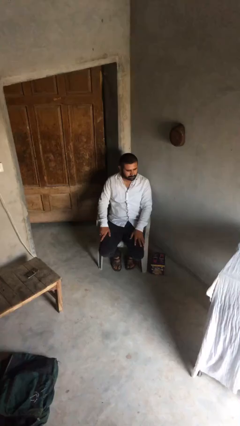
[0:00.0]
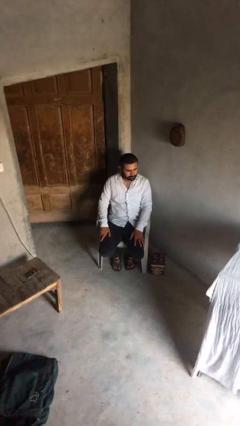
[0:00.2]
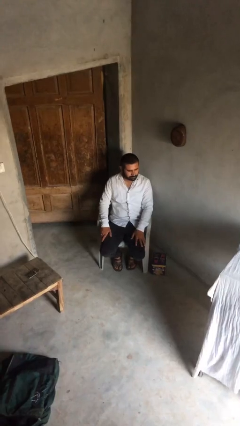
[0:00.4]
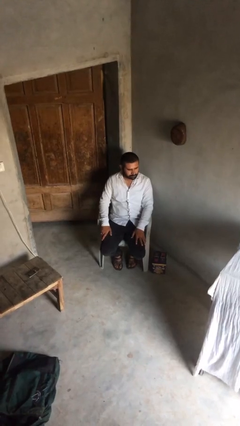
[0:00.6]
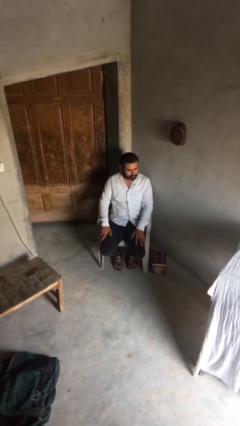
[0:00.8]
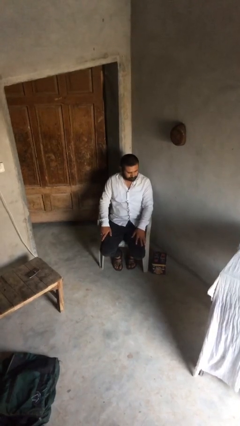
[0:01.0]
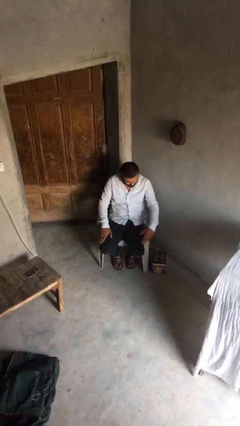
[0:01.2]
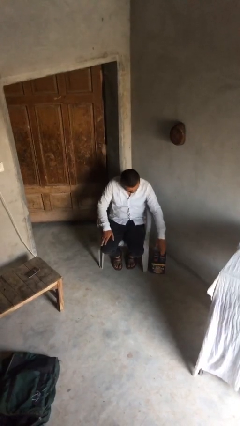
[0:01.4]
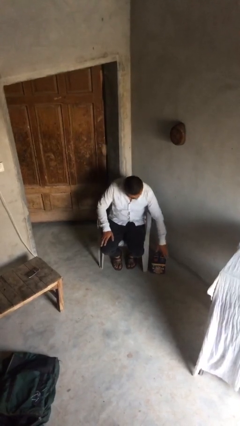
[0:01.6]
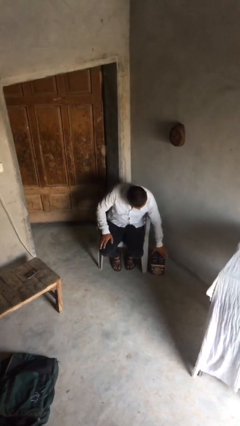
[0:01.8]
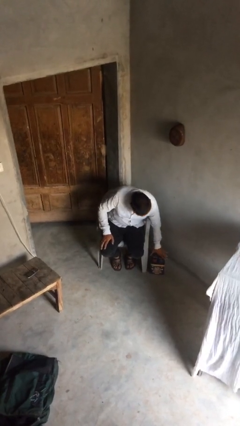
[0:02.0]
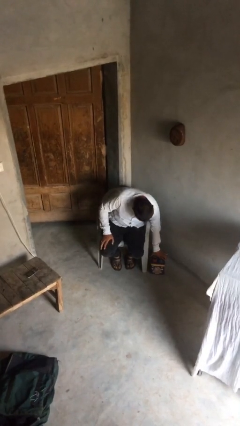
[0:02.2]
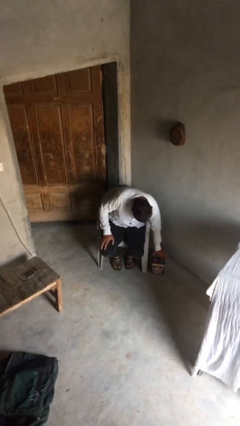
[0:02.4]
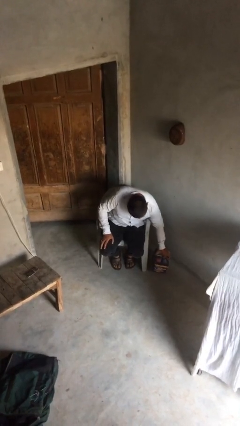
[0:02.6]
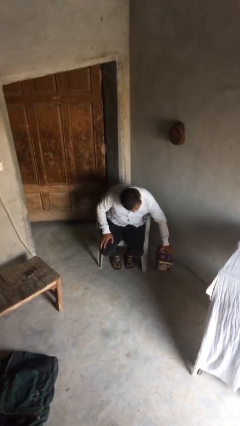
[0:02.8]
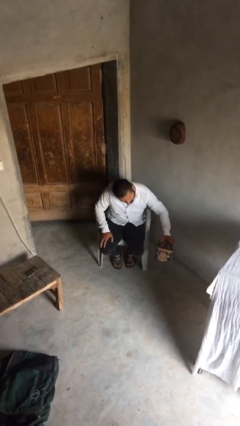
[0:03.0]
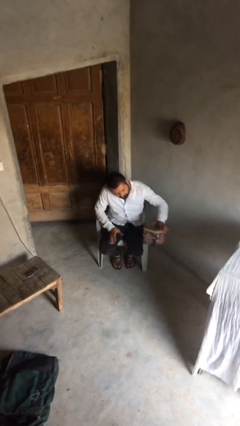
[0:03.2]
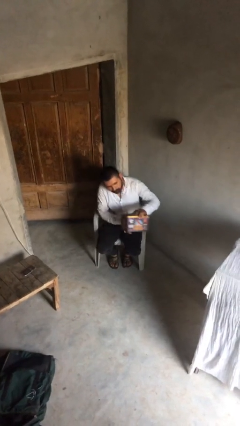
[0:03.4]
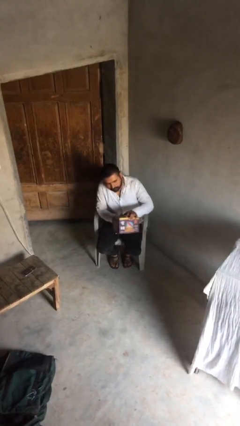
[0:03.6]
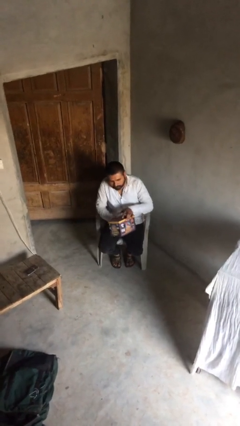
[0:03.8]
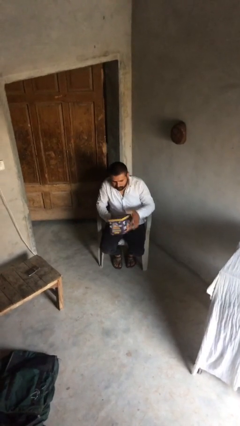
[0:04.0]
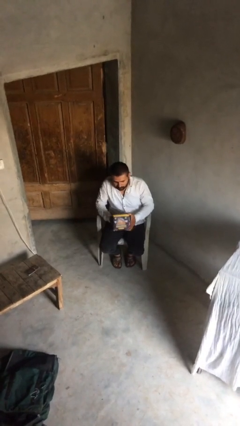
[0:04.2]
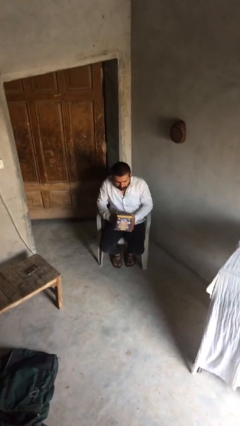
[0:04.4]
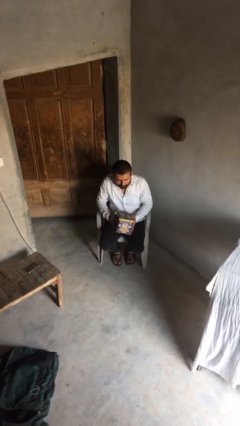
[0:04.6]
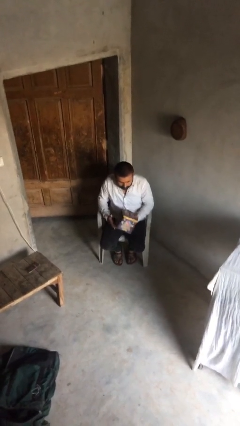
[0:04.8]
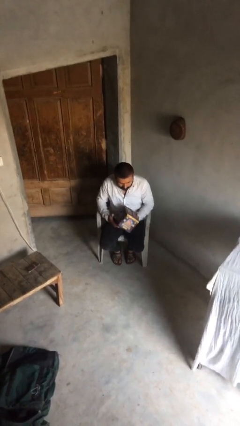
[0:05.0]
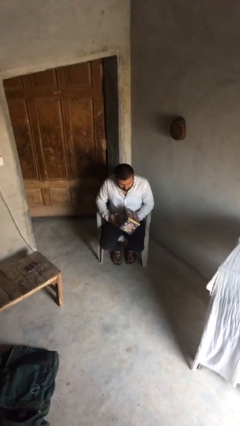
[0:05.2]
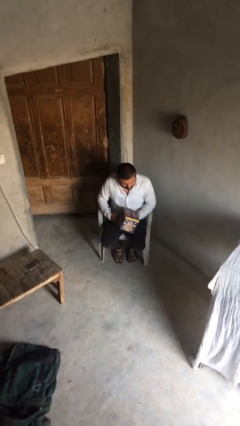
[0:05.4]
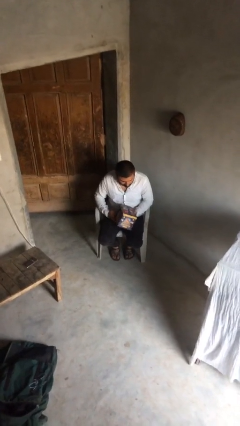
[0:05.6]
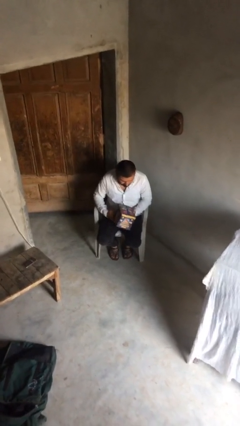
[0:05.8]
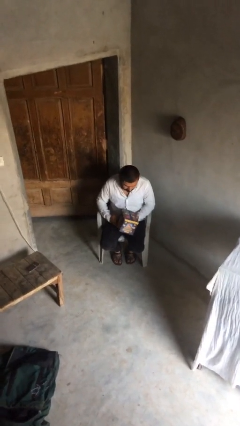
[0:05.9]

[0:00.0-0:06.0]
person picks up object from floor

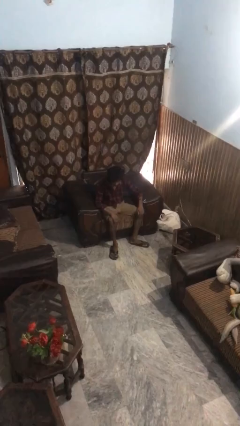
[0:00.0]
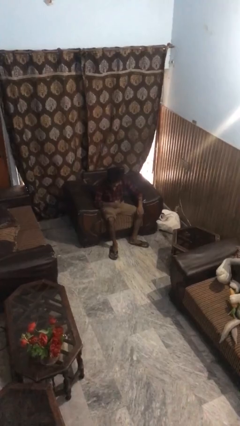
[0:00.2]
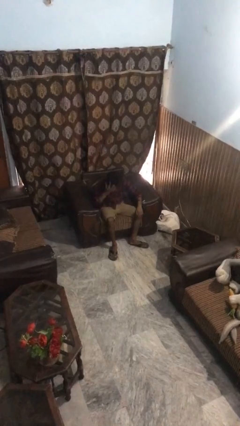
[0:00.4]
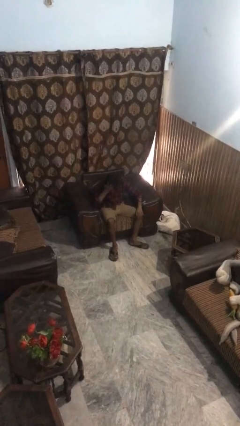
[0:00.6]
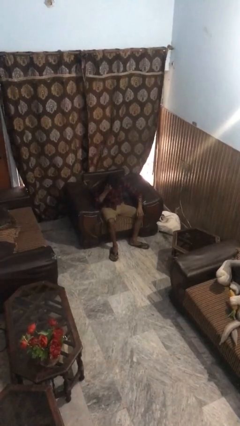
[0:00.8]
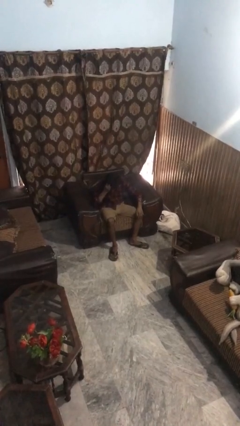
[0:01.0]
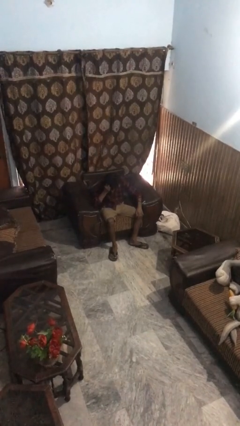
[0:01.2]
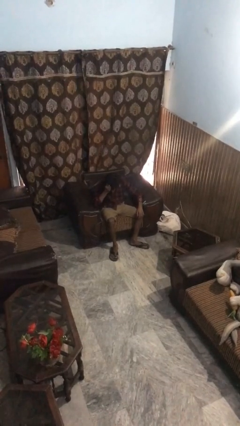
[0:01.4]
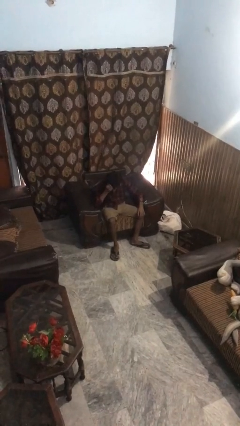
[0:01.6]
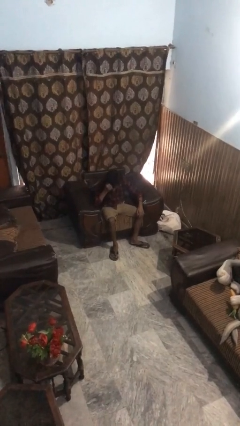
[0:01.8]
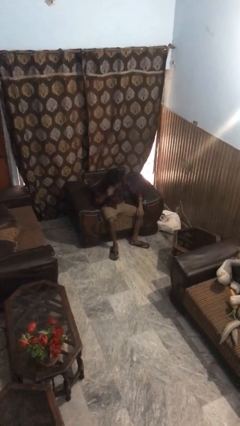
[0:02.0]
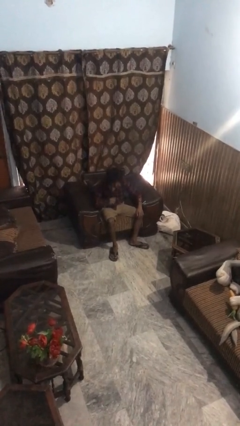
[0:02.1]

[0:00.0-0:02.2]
person strokes hair

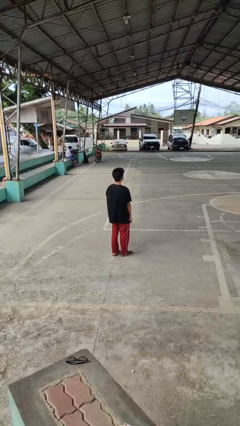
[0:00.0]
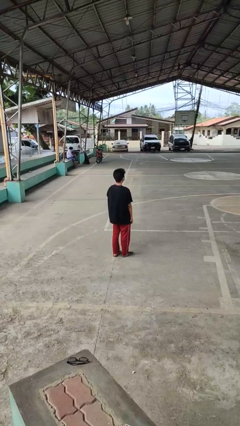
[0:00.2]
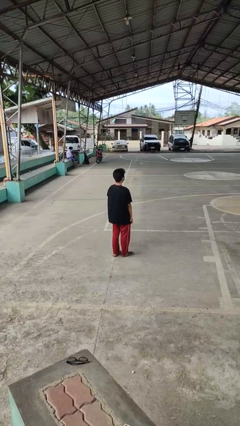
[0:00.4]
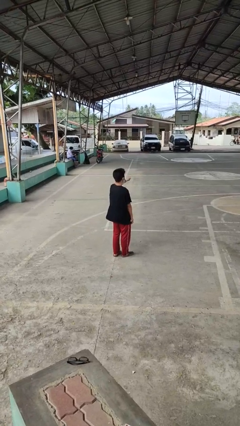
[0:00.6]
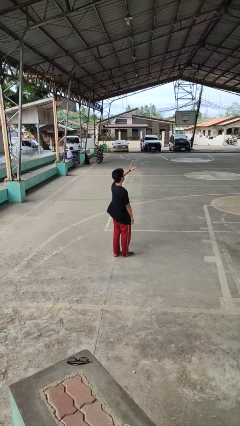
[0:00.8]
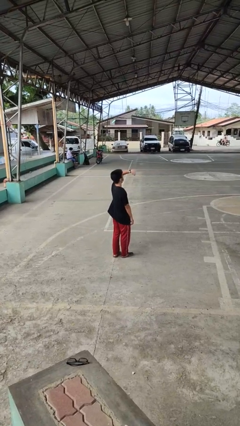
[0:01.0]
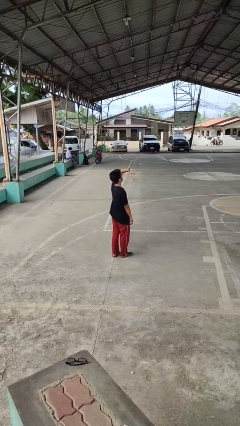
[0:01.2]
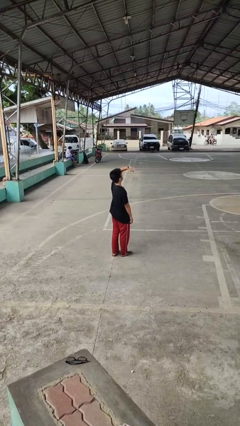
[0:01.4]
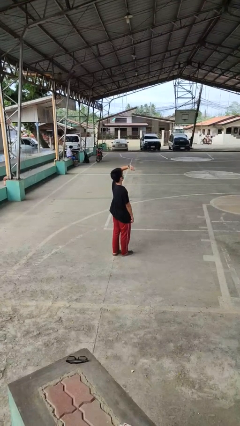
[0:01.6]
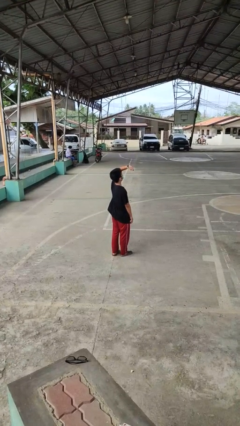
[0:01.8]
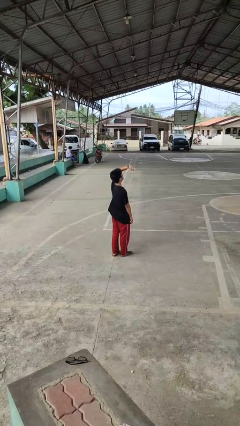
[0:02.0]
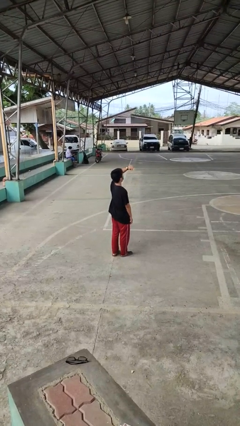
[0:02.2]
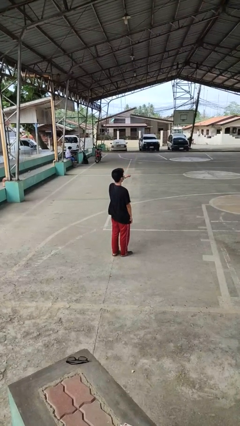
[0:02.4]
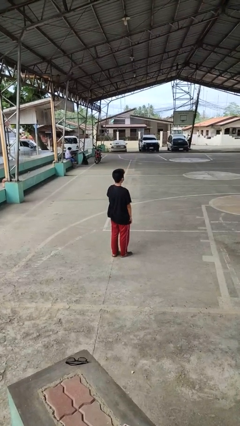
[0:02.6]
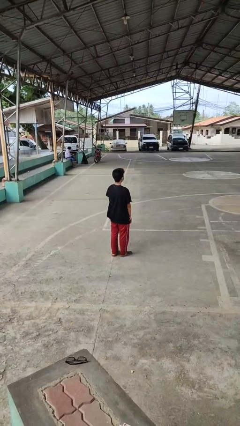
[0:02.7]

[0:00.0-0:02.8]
person looks at wristwatch

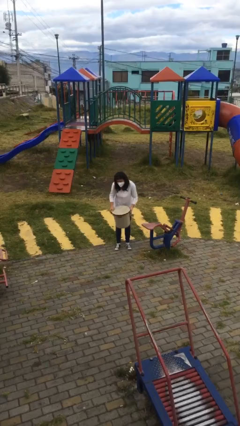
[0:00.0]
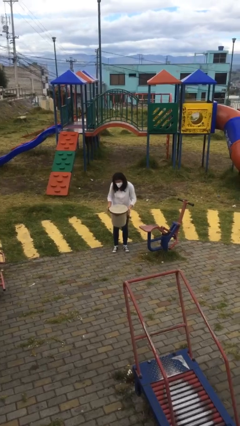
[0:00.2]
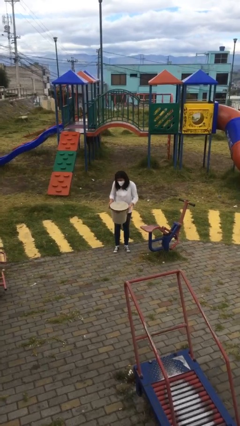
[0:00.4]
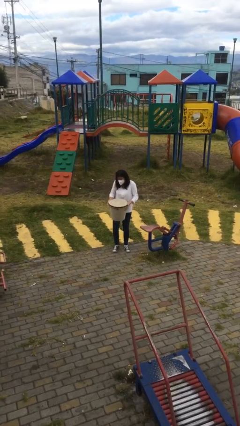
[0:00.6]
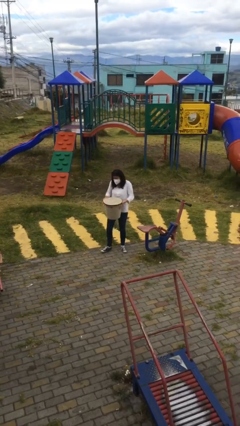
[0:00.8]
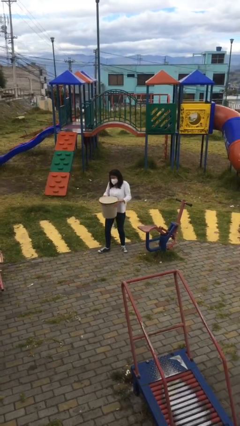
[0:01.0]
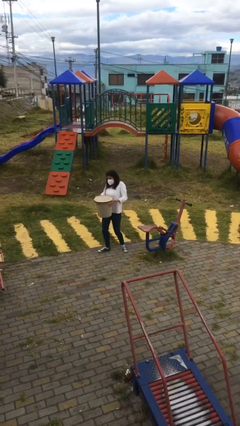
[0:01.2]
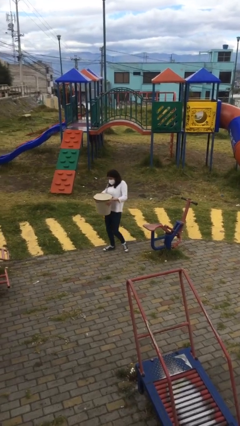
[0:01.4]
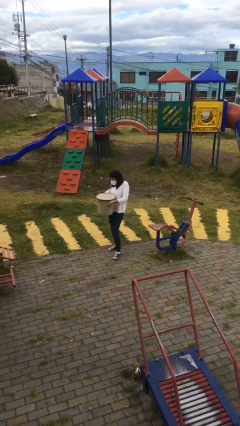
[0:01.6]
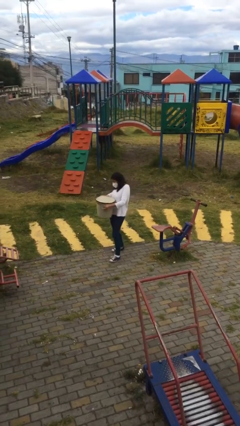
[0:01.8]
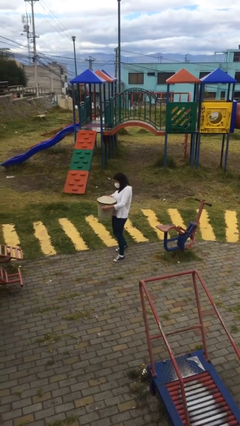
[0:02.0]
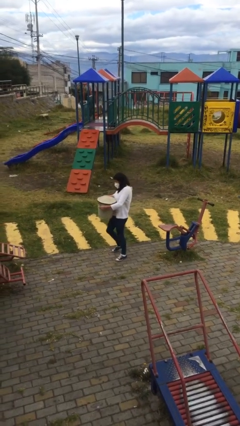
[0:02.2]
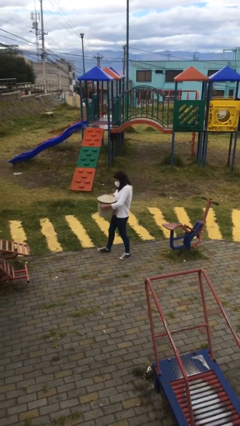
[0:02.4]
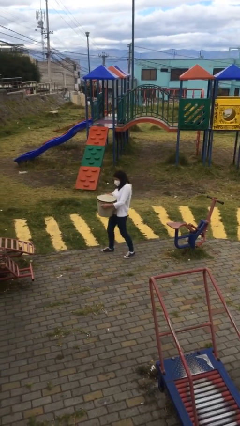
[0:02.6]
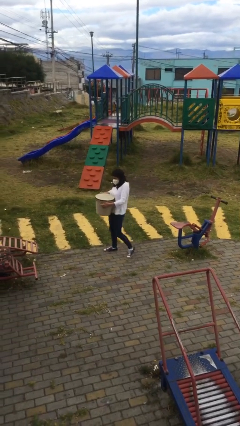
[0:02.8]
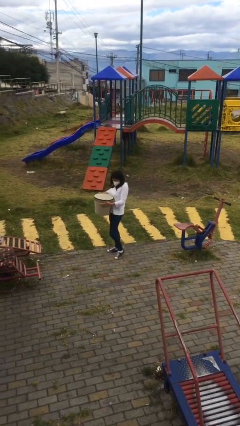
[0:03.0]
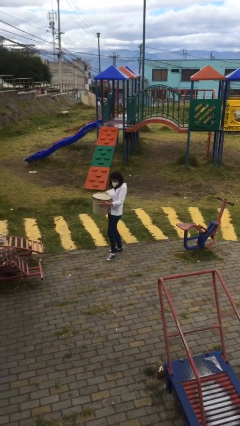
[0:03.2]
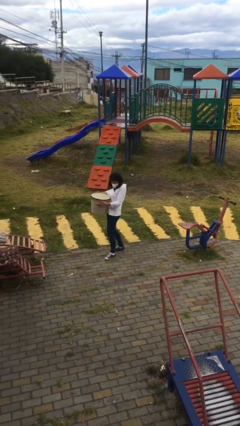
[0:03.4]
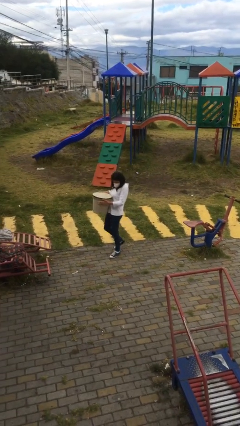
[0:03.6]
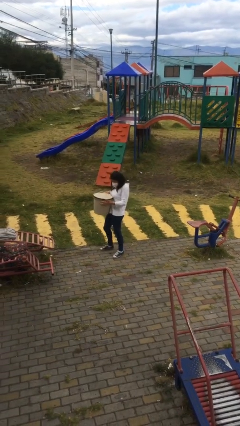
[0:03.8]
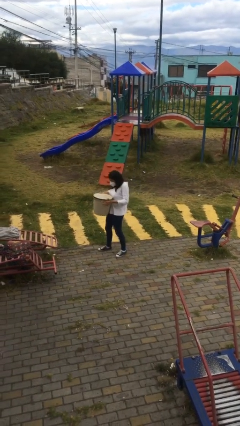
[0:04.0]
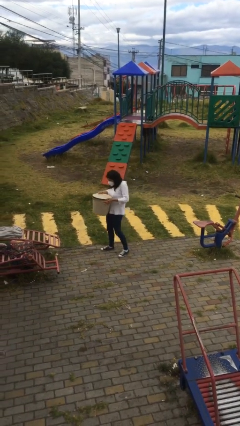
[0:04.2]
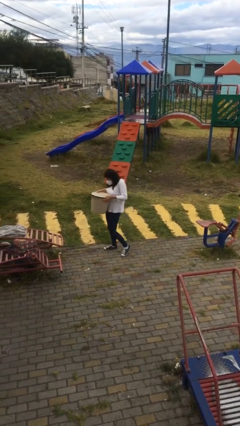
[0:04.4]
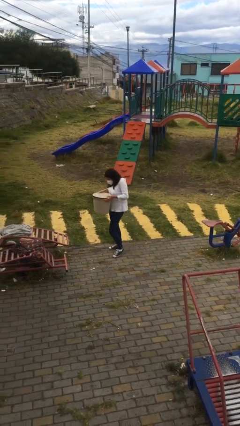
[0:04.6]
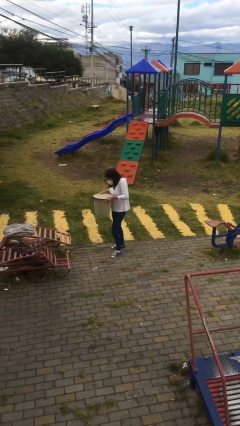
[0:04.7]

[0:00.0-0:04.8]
person carries heavy object

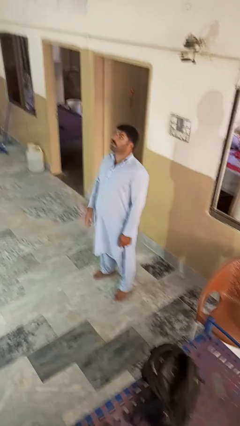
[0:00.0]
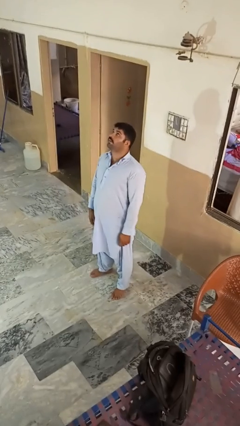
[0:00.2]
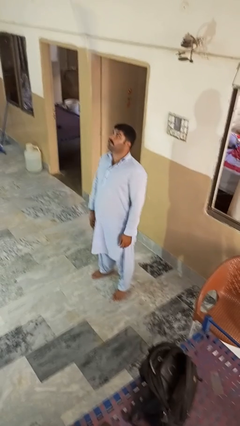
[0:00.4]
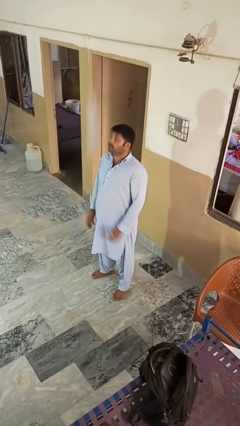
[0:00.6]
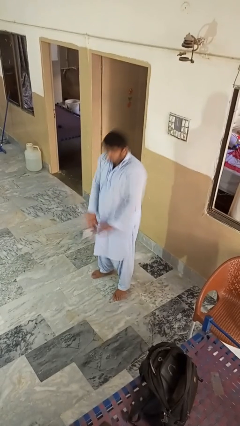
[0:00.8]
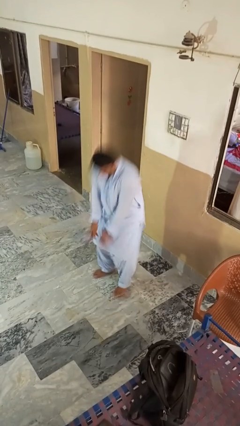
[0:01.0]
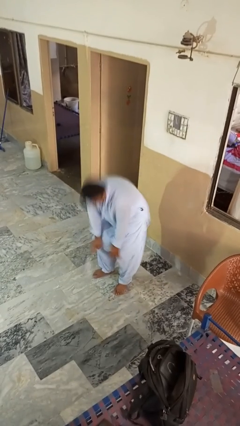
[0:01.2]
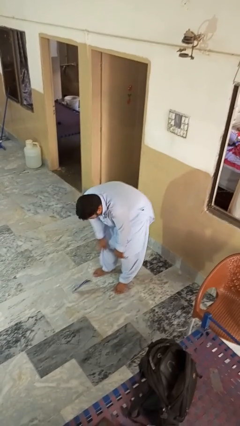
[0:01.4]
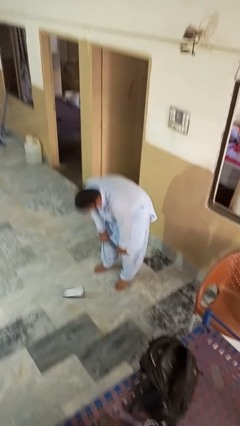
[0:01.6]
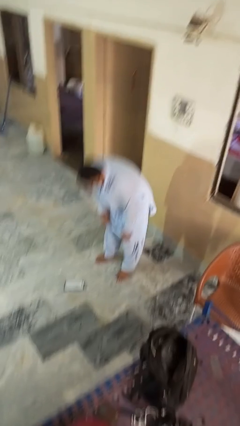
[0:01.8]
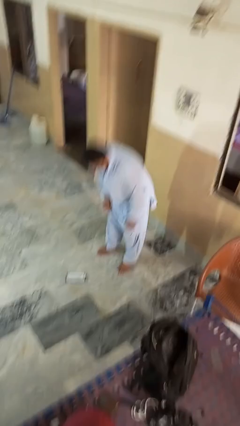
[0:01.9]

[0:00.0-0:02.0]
person catches dropped object
